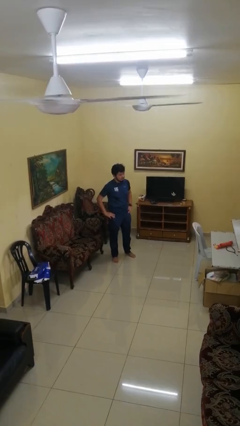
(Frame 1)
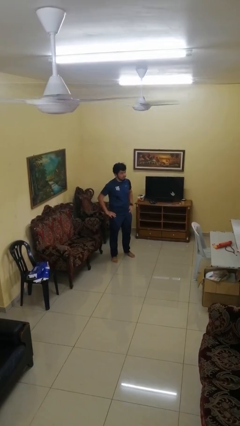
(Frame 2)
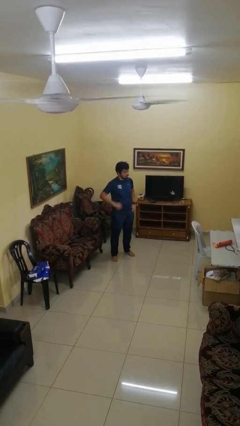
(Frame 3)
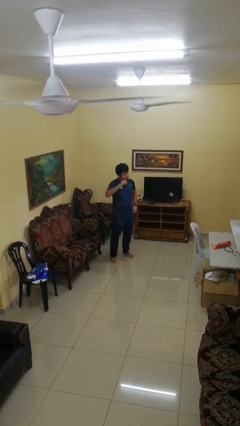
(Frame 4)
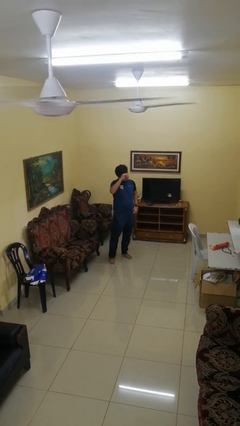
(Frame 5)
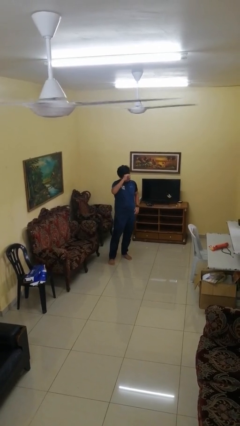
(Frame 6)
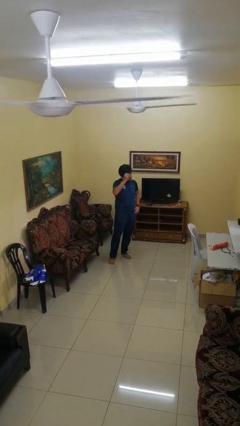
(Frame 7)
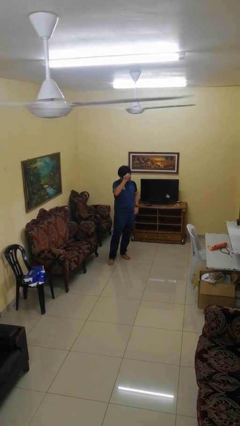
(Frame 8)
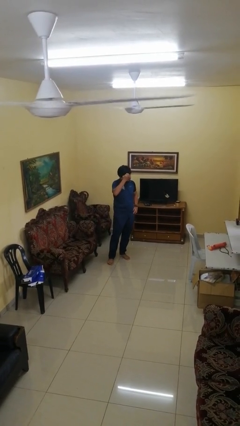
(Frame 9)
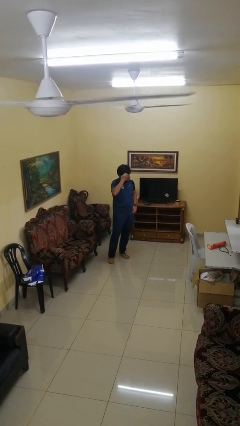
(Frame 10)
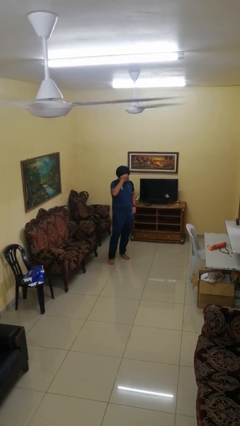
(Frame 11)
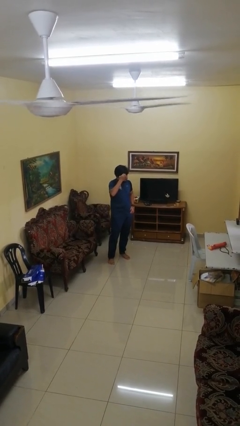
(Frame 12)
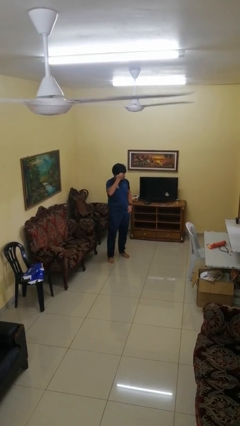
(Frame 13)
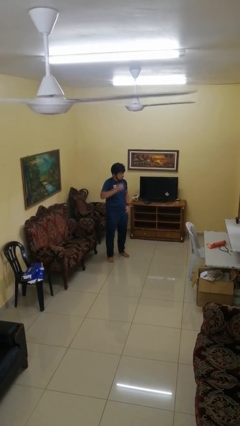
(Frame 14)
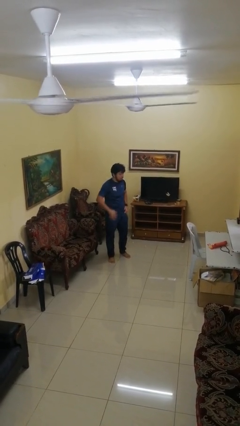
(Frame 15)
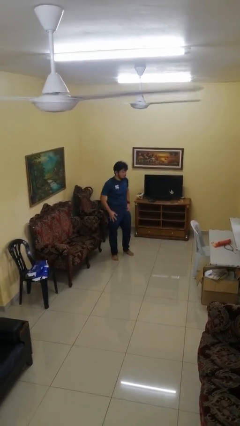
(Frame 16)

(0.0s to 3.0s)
person scratches face

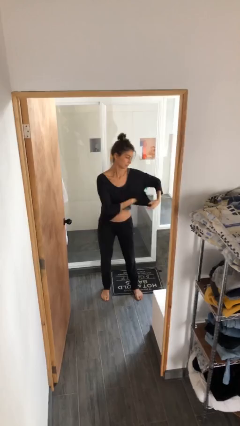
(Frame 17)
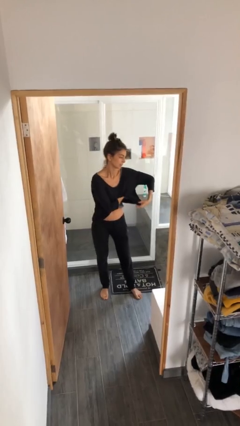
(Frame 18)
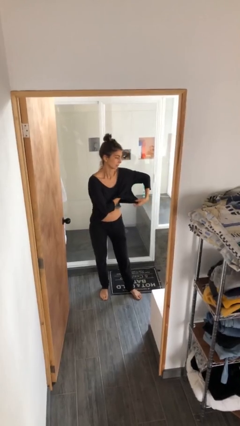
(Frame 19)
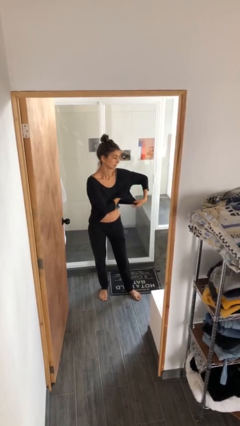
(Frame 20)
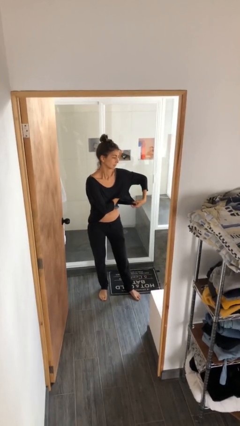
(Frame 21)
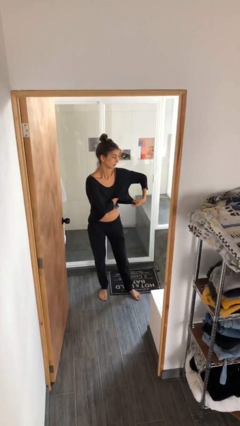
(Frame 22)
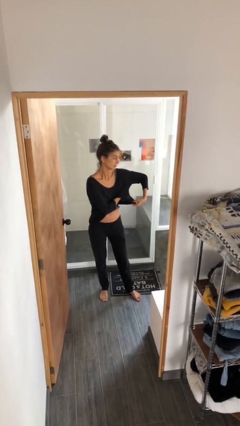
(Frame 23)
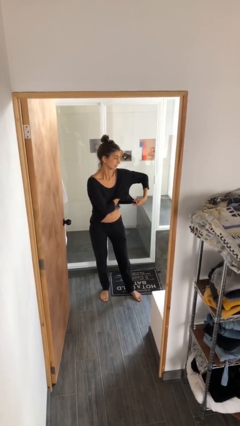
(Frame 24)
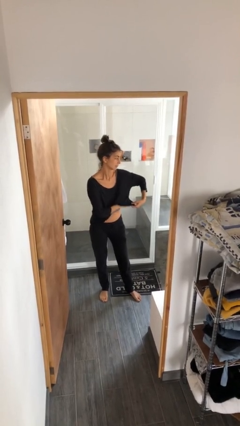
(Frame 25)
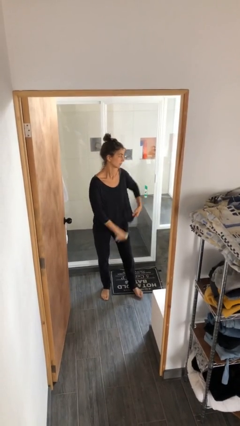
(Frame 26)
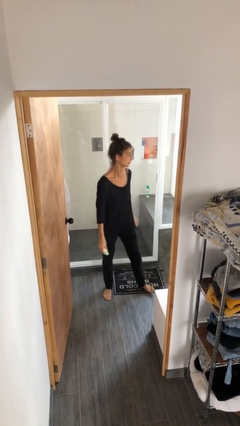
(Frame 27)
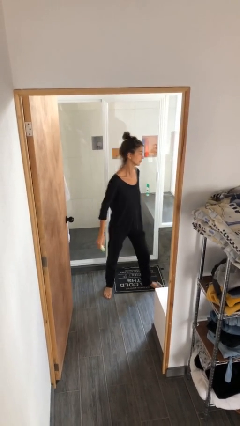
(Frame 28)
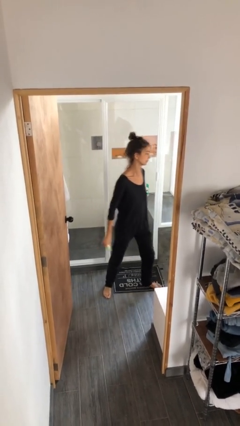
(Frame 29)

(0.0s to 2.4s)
person applies deodorant

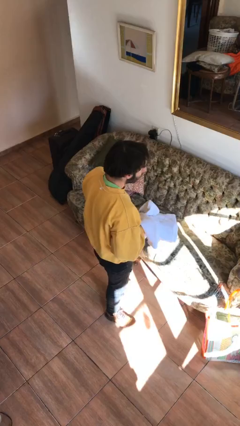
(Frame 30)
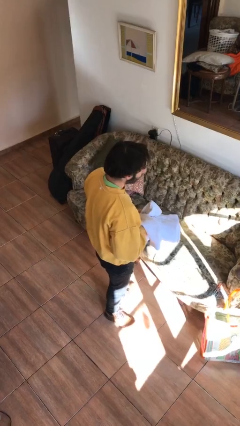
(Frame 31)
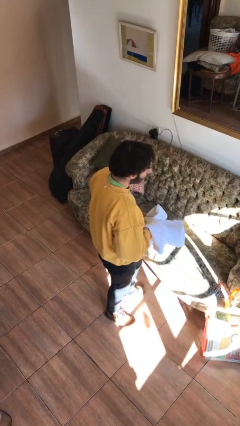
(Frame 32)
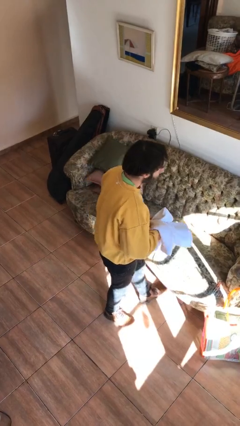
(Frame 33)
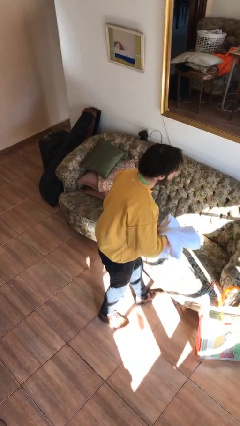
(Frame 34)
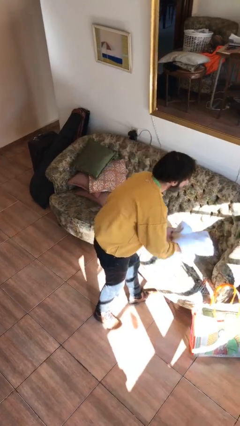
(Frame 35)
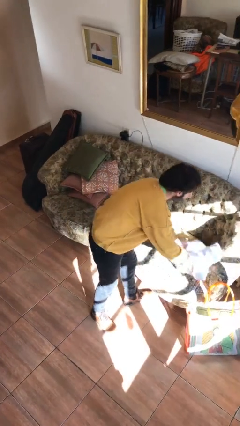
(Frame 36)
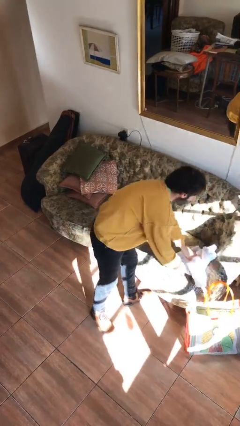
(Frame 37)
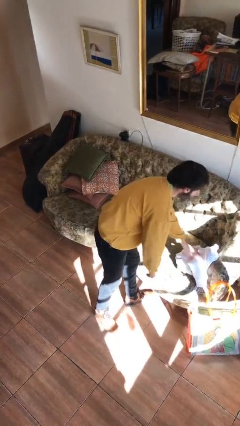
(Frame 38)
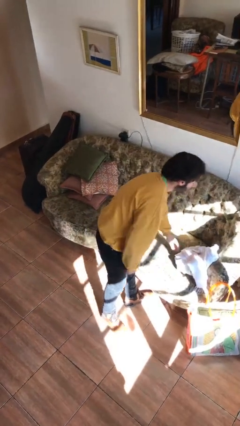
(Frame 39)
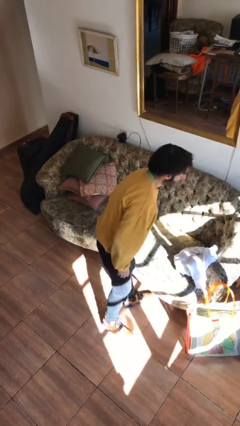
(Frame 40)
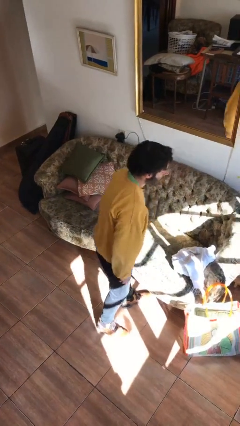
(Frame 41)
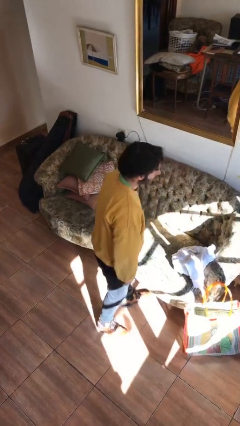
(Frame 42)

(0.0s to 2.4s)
person puts down object on couch

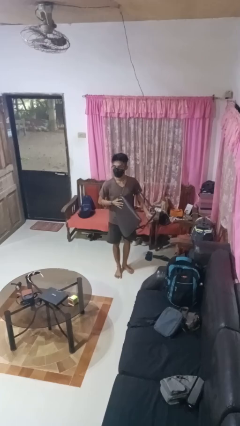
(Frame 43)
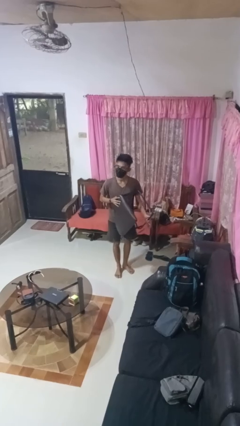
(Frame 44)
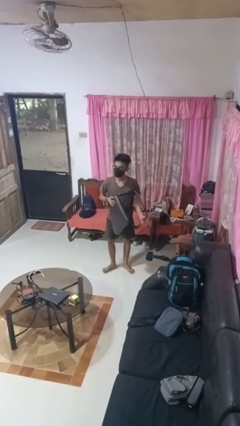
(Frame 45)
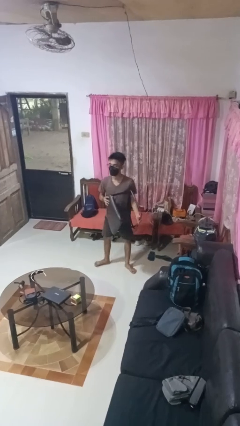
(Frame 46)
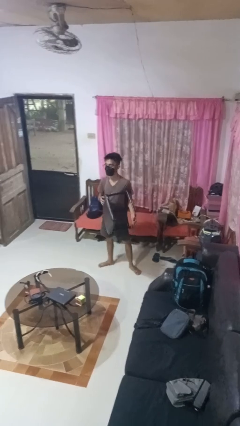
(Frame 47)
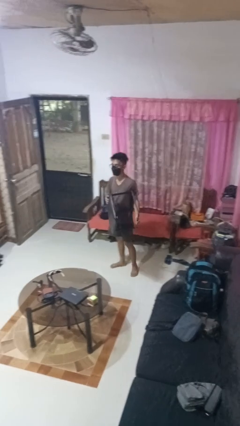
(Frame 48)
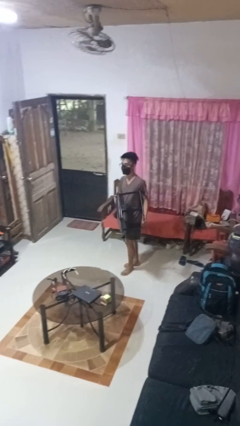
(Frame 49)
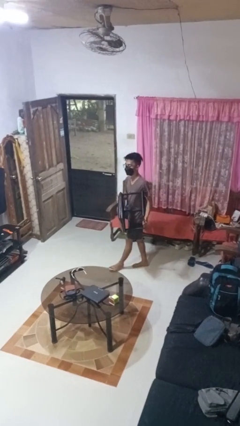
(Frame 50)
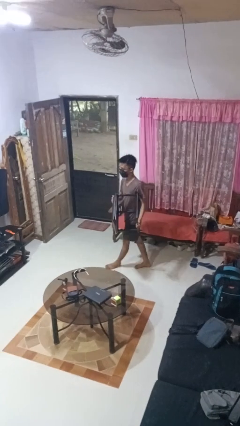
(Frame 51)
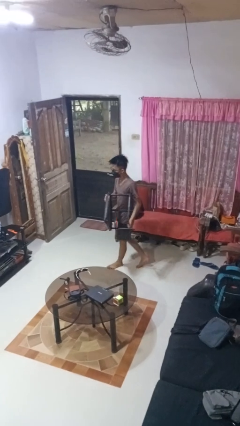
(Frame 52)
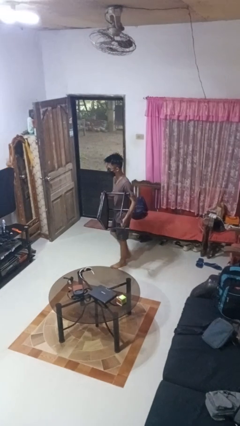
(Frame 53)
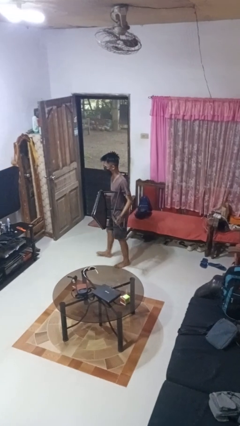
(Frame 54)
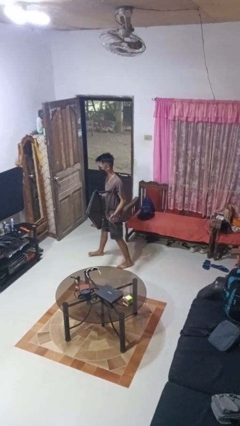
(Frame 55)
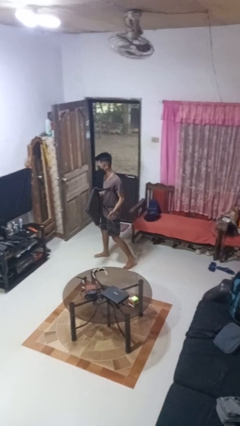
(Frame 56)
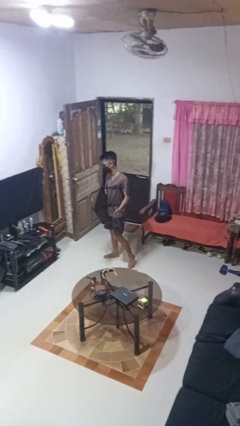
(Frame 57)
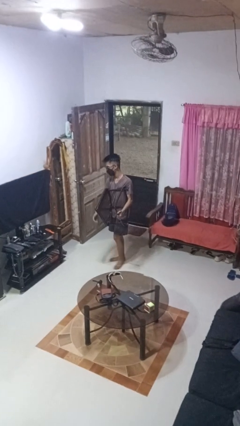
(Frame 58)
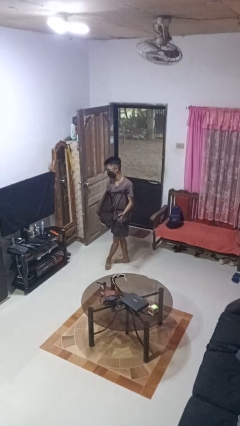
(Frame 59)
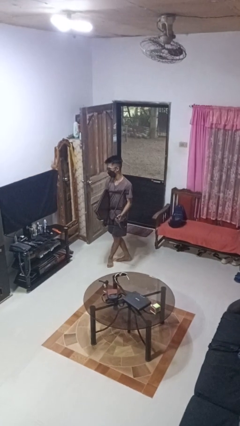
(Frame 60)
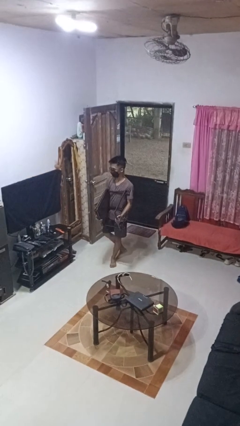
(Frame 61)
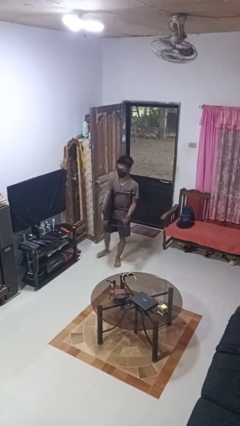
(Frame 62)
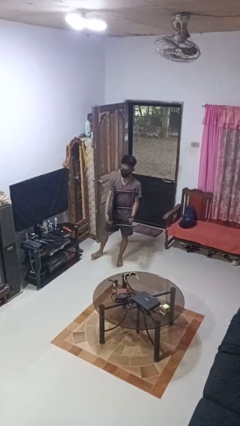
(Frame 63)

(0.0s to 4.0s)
person carries furniture

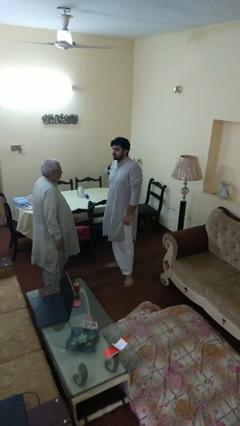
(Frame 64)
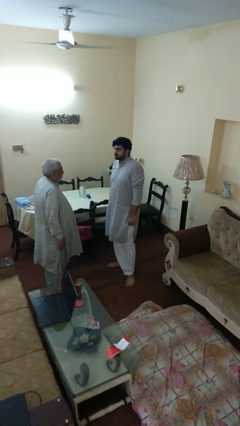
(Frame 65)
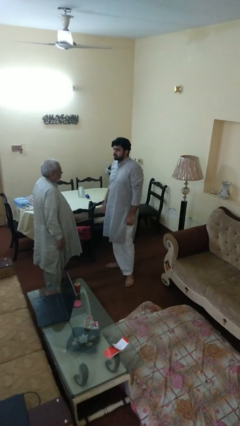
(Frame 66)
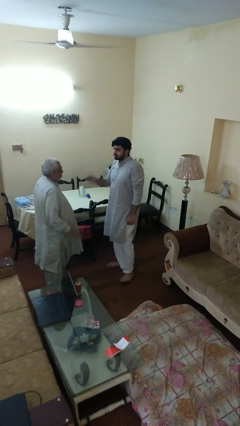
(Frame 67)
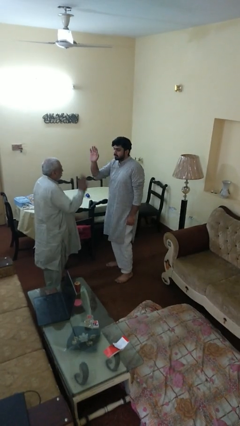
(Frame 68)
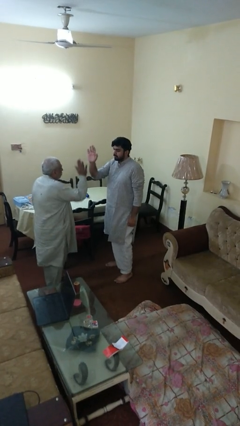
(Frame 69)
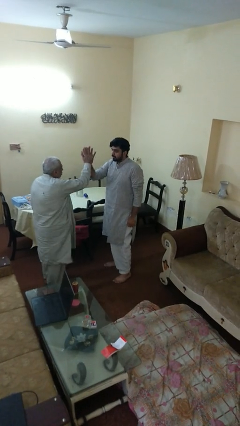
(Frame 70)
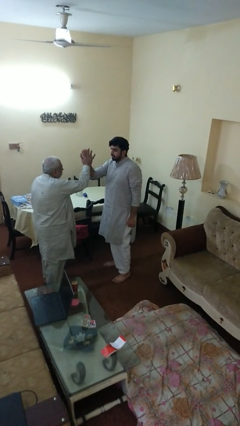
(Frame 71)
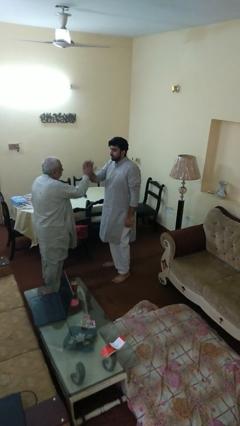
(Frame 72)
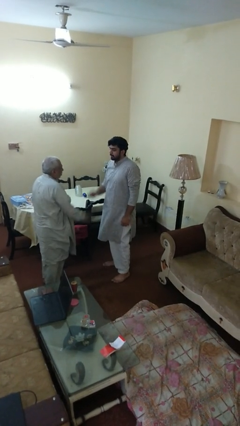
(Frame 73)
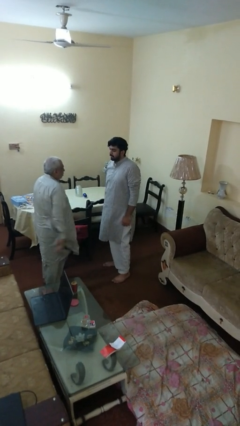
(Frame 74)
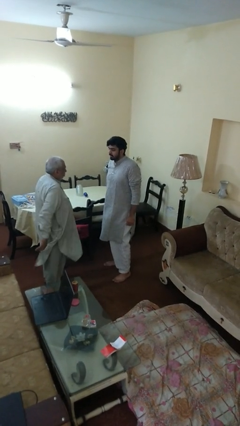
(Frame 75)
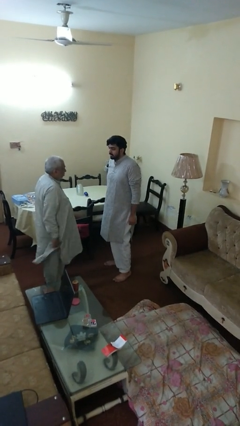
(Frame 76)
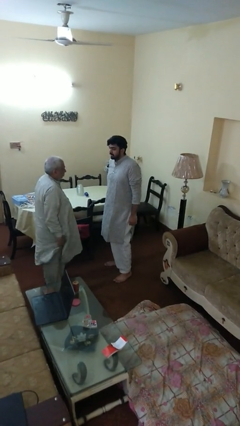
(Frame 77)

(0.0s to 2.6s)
person highfives hand

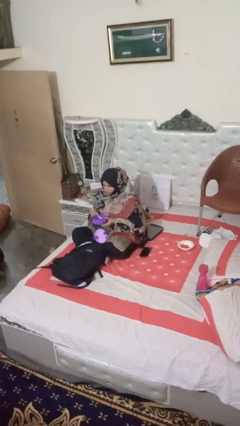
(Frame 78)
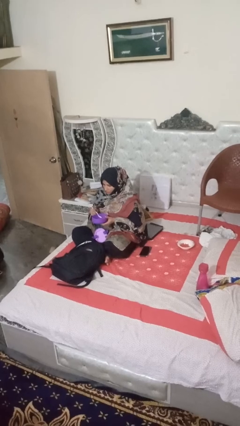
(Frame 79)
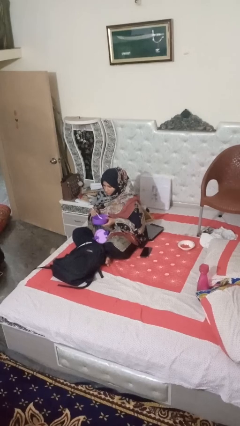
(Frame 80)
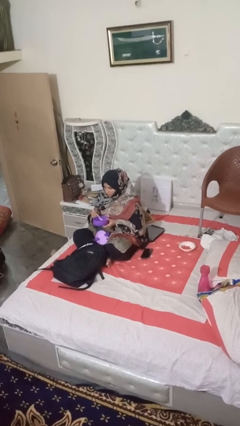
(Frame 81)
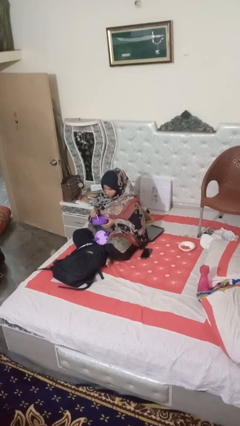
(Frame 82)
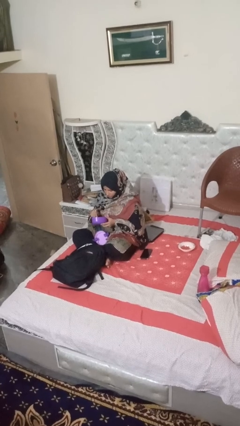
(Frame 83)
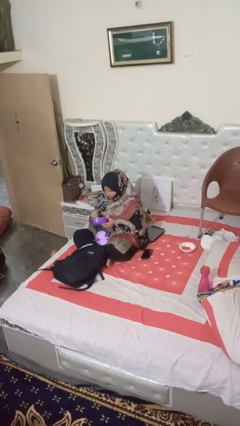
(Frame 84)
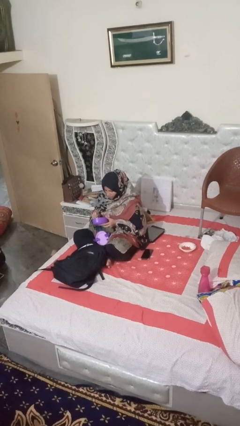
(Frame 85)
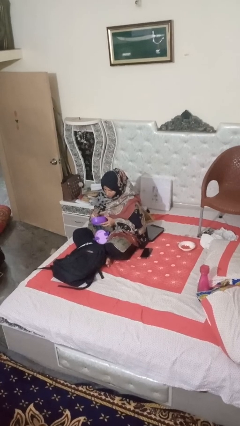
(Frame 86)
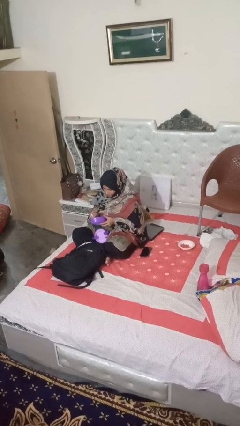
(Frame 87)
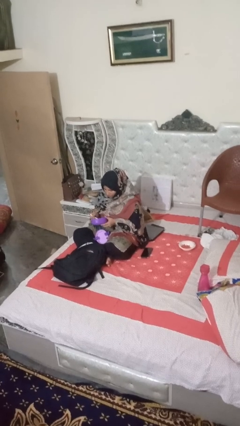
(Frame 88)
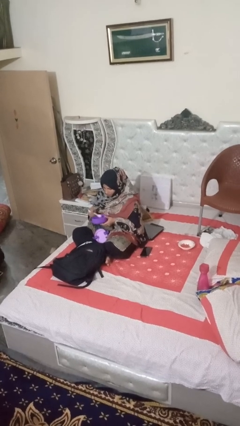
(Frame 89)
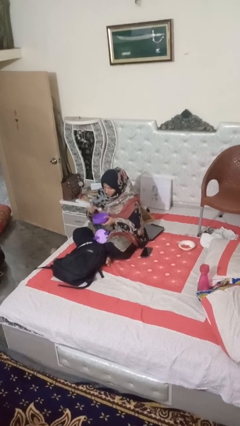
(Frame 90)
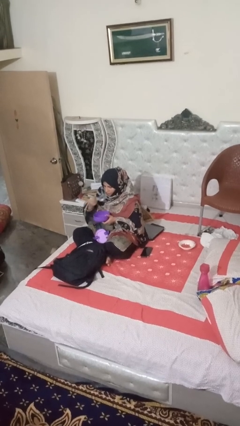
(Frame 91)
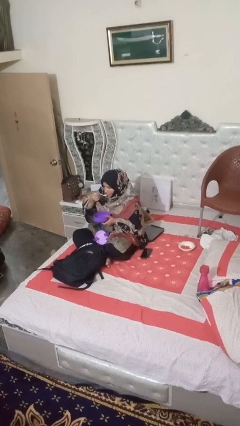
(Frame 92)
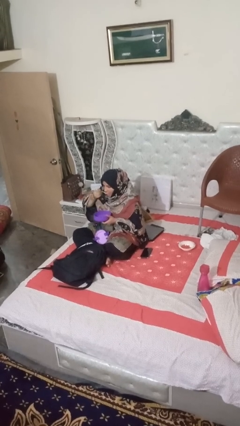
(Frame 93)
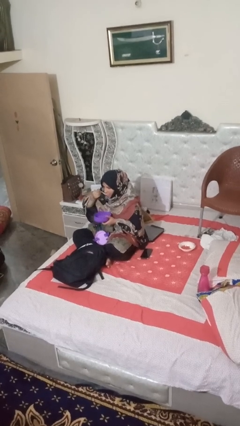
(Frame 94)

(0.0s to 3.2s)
person eats snack from bag
